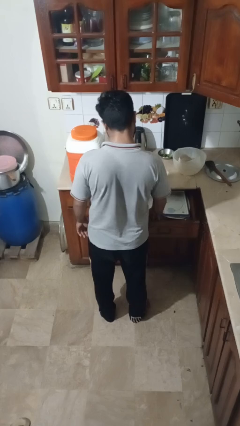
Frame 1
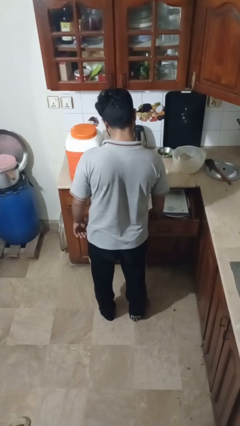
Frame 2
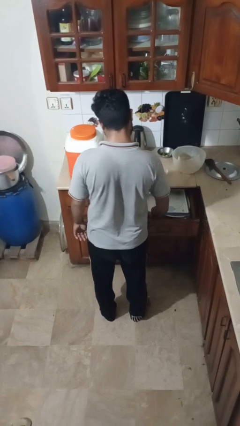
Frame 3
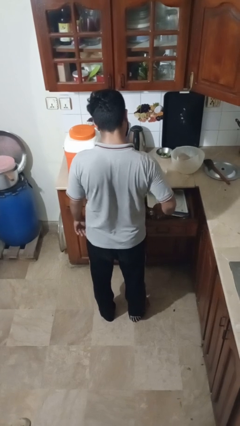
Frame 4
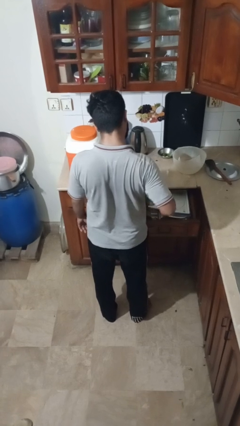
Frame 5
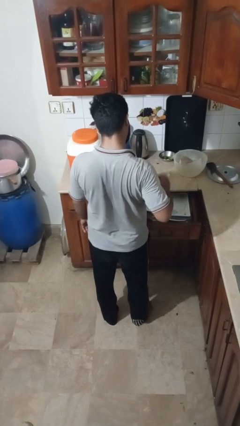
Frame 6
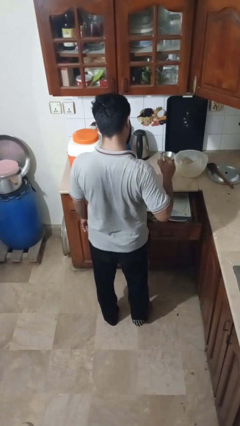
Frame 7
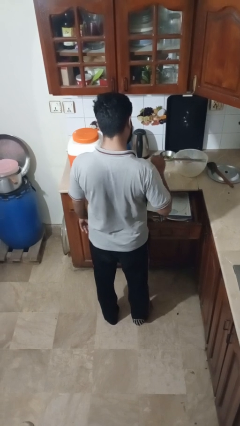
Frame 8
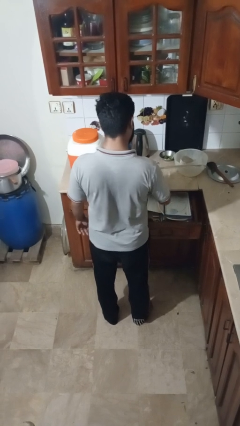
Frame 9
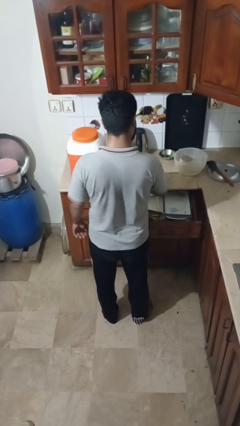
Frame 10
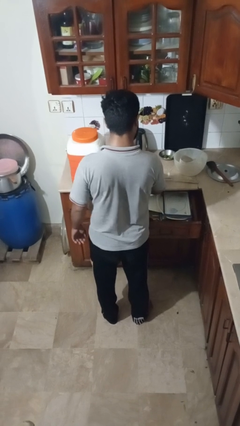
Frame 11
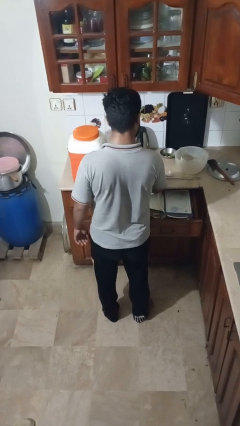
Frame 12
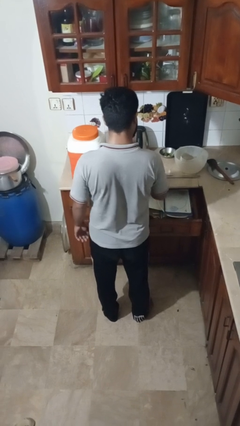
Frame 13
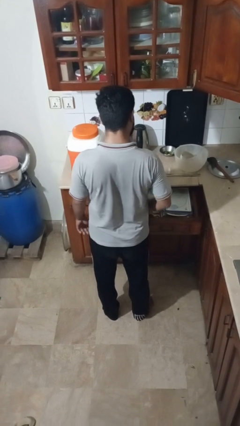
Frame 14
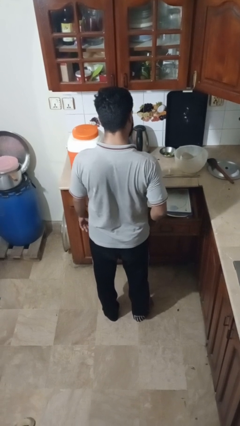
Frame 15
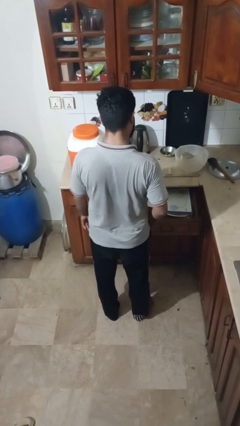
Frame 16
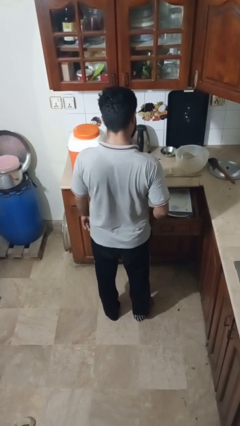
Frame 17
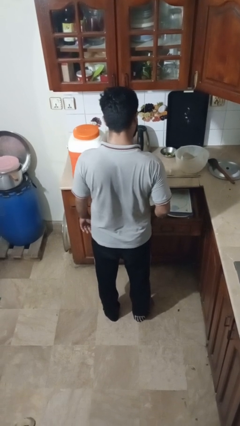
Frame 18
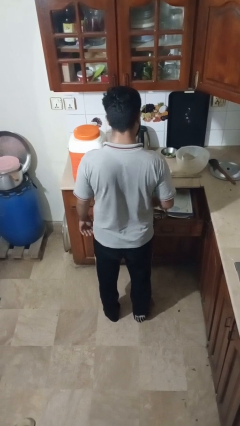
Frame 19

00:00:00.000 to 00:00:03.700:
person takes object from kitchen drawer

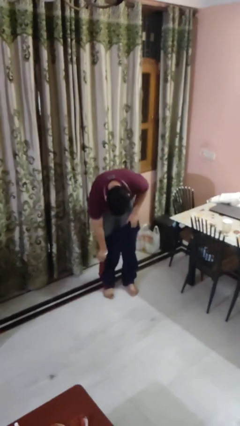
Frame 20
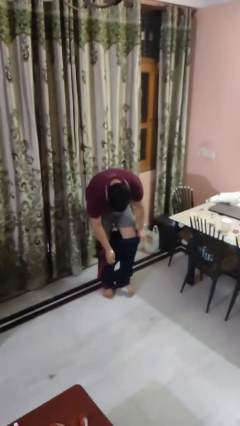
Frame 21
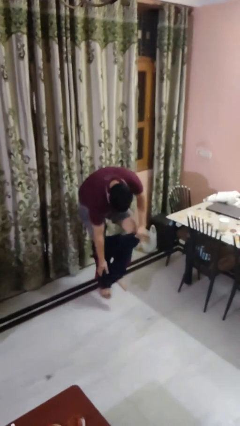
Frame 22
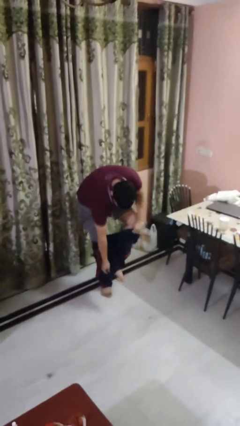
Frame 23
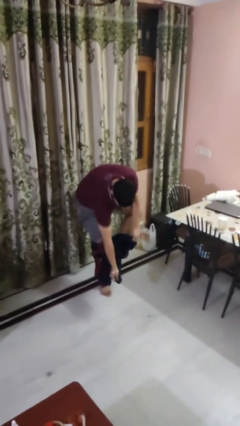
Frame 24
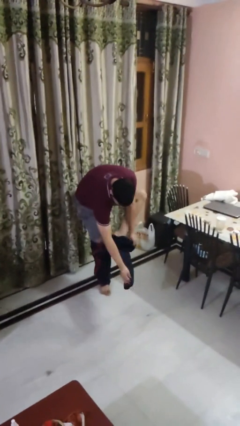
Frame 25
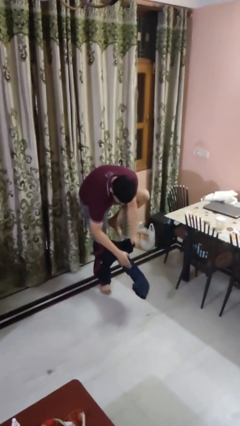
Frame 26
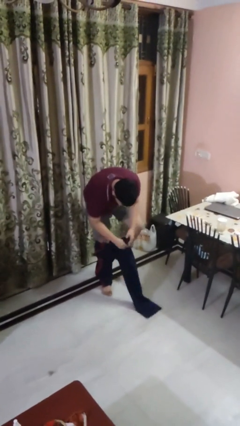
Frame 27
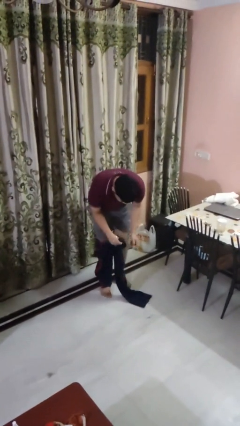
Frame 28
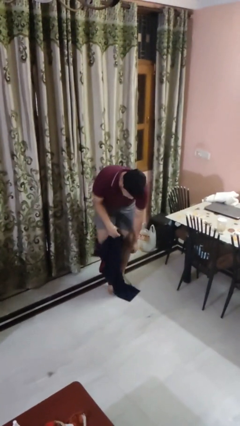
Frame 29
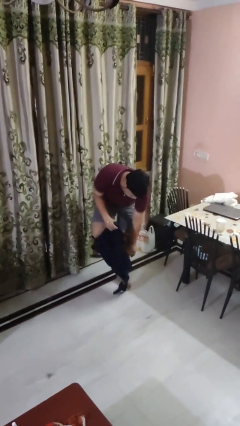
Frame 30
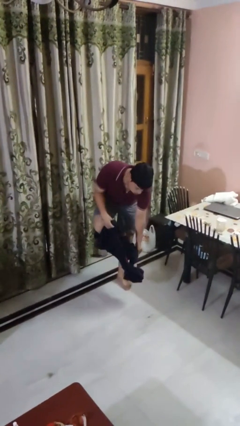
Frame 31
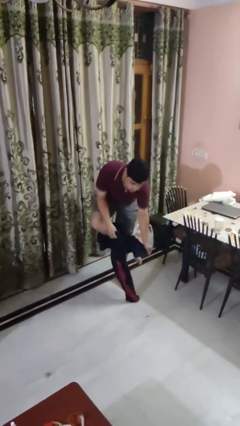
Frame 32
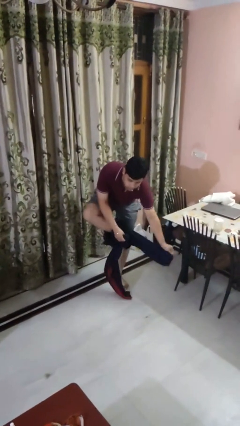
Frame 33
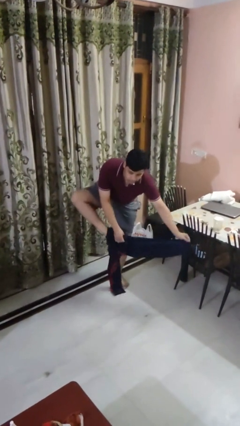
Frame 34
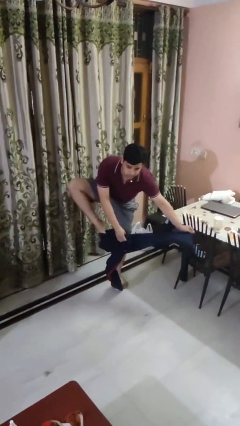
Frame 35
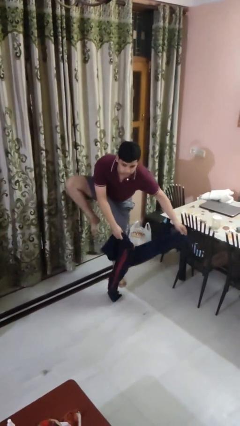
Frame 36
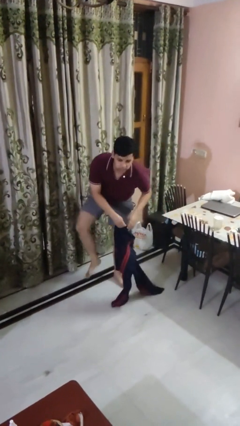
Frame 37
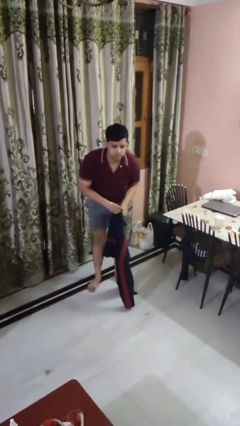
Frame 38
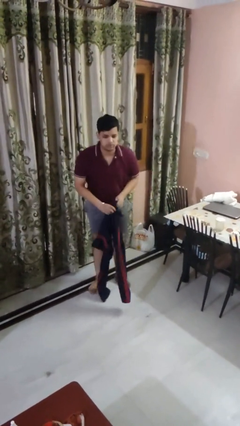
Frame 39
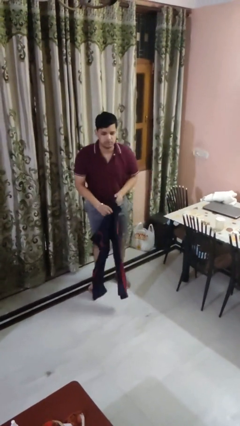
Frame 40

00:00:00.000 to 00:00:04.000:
person takes off pants

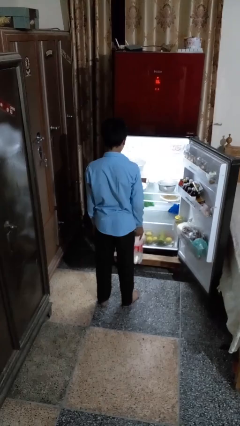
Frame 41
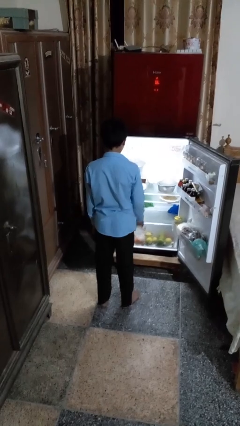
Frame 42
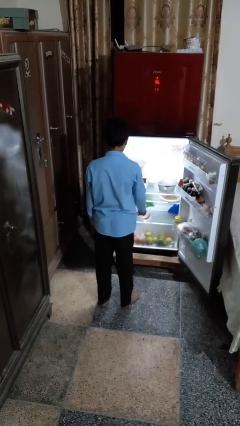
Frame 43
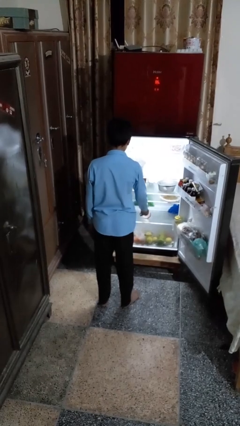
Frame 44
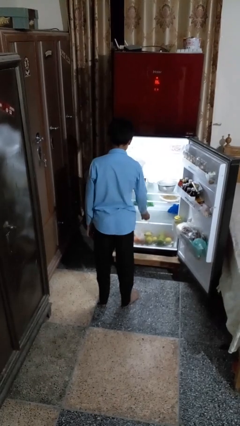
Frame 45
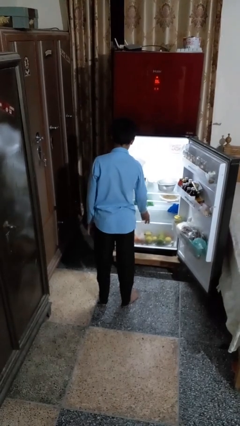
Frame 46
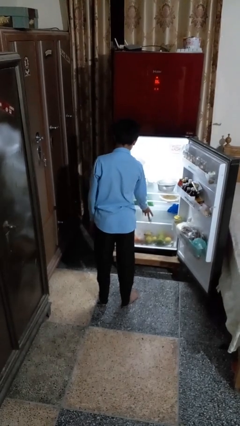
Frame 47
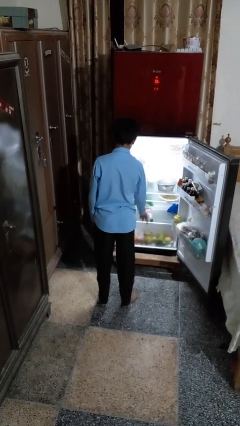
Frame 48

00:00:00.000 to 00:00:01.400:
person puts object into refrigerator

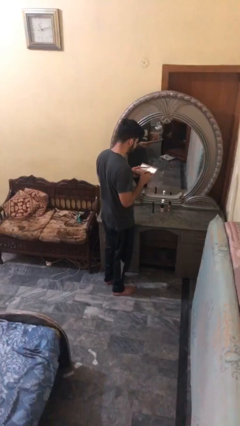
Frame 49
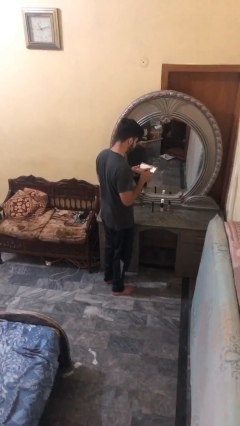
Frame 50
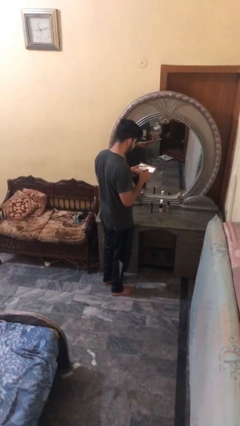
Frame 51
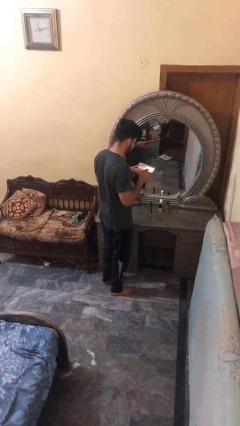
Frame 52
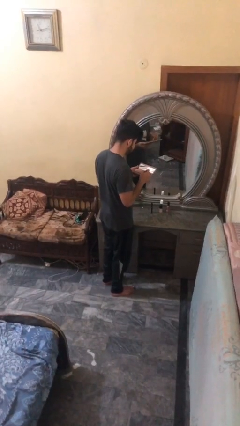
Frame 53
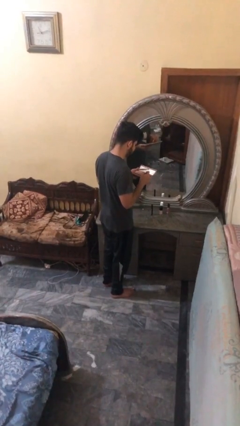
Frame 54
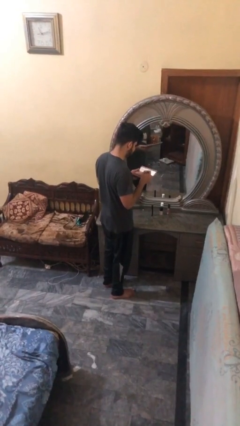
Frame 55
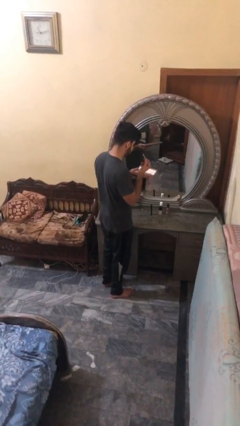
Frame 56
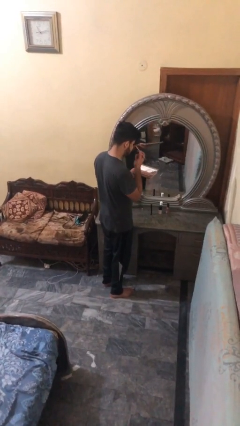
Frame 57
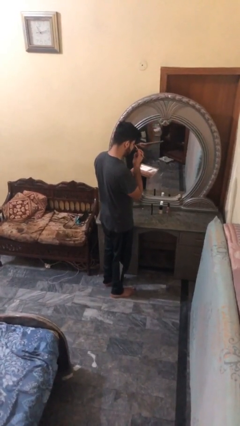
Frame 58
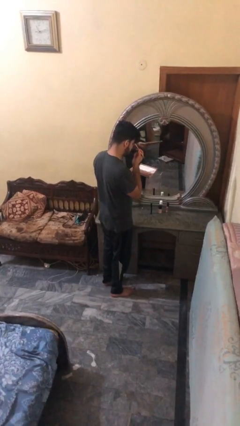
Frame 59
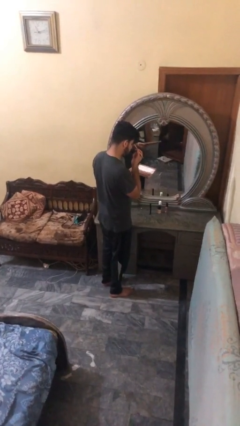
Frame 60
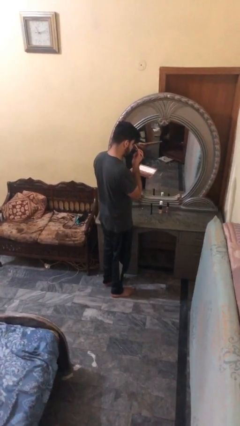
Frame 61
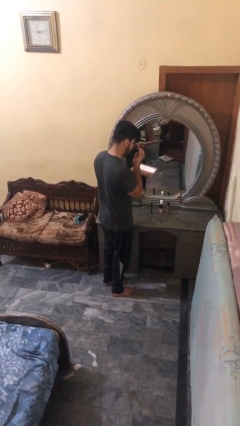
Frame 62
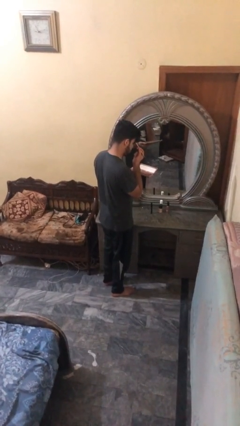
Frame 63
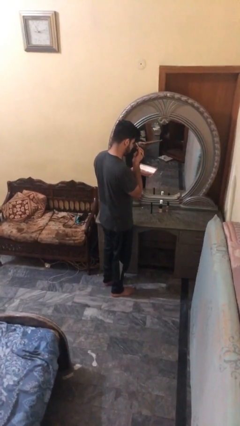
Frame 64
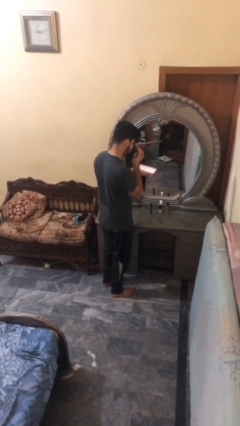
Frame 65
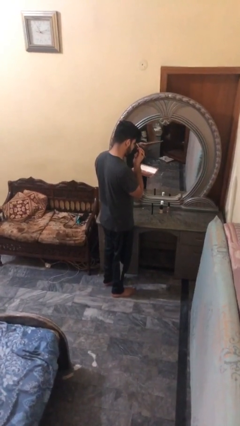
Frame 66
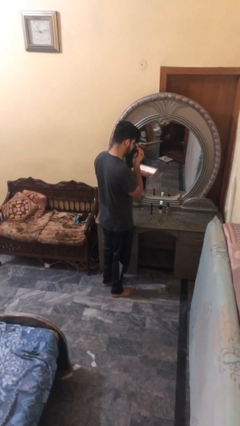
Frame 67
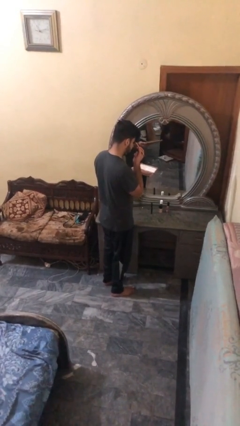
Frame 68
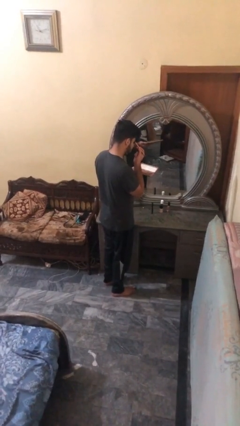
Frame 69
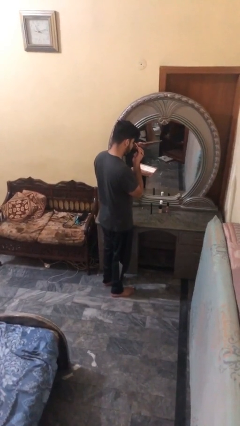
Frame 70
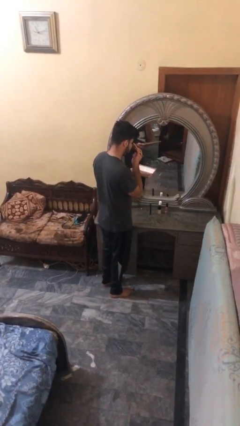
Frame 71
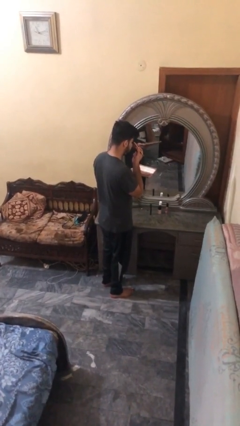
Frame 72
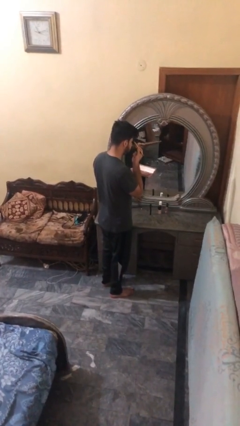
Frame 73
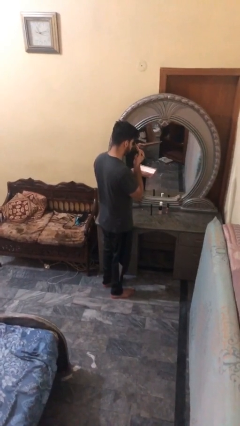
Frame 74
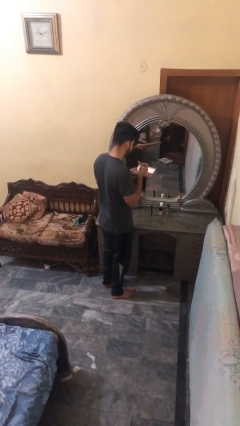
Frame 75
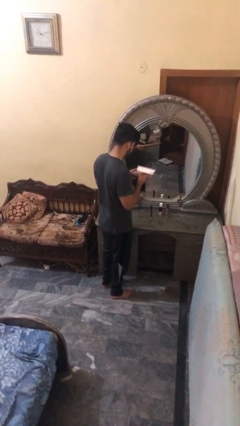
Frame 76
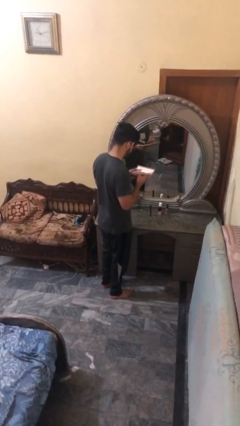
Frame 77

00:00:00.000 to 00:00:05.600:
person applies eye makeup

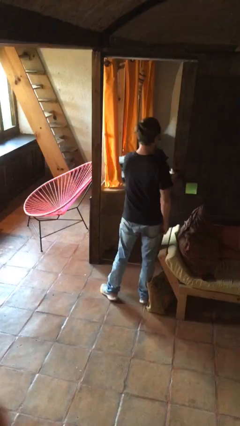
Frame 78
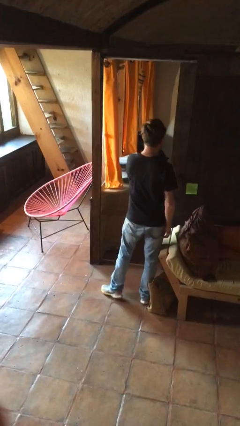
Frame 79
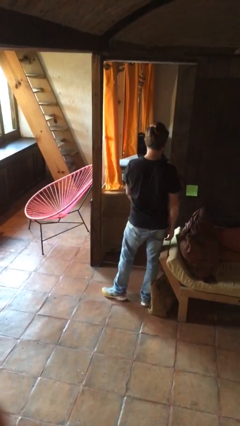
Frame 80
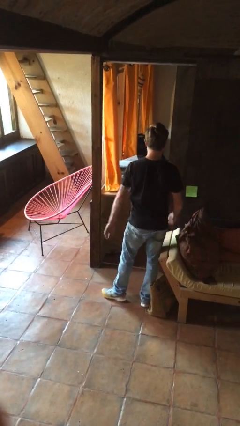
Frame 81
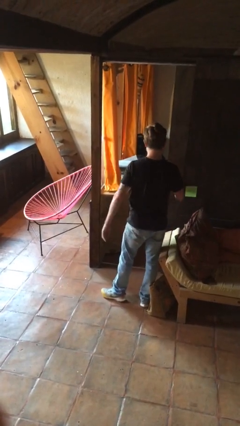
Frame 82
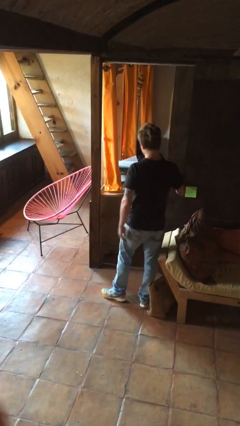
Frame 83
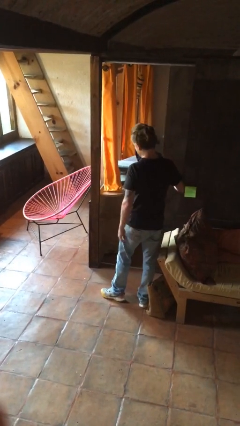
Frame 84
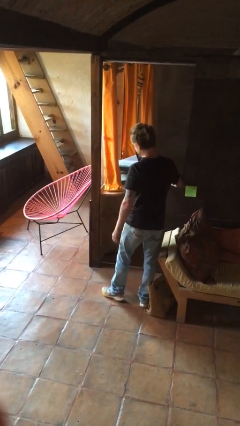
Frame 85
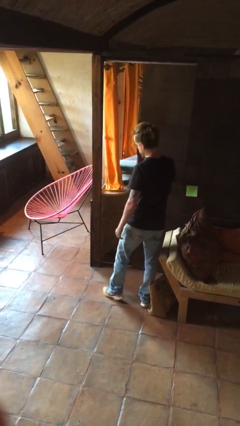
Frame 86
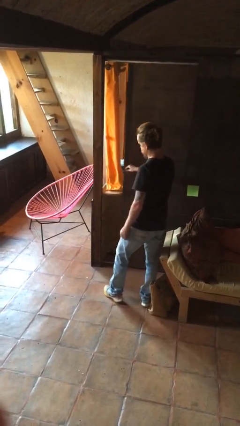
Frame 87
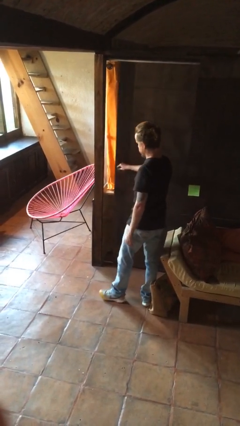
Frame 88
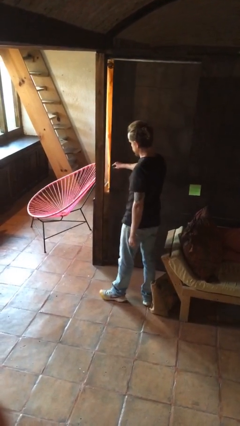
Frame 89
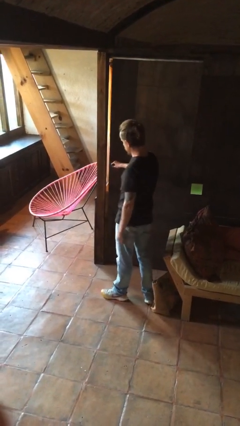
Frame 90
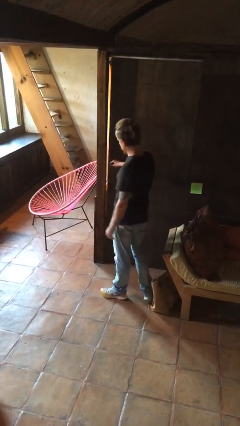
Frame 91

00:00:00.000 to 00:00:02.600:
person closes facility door
